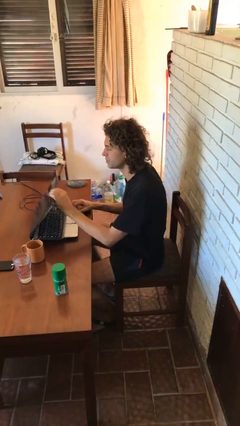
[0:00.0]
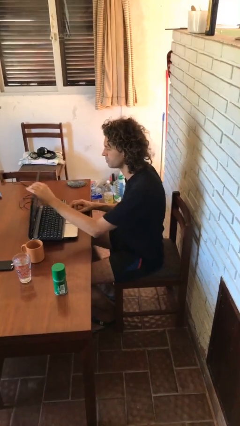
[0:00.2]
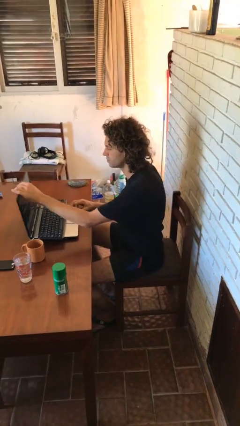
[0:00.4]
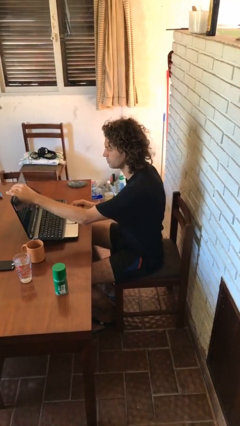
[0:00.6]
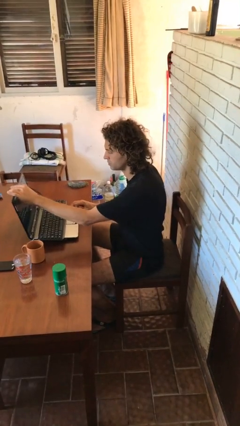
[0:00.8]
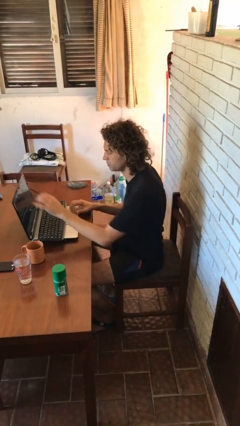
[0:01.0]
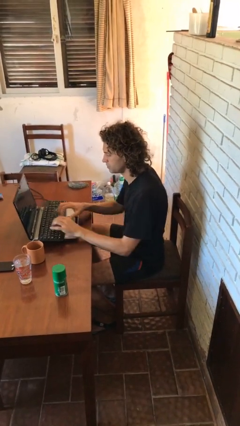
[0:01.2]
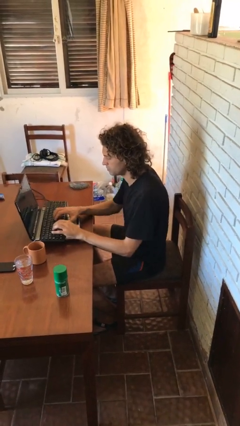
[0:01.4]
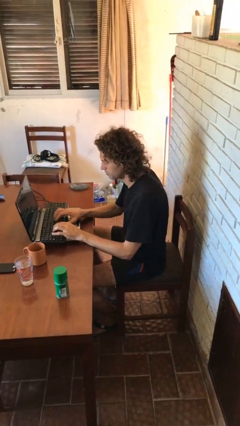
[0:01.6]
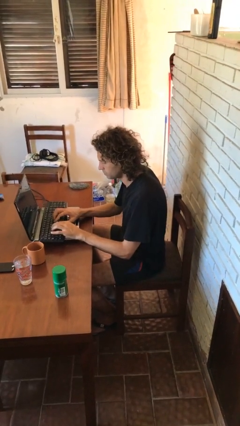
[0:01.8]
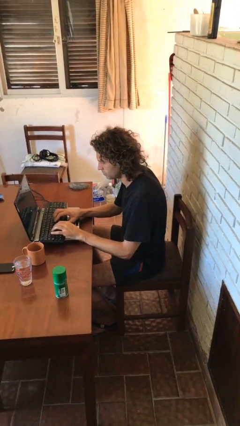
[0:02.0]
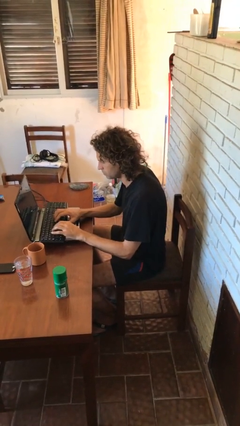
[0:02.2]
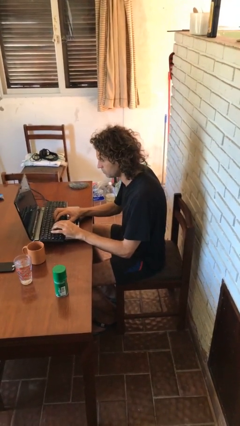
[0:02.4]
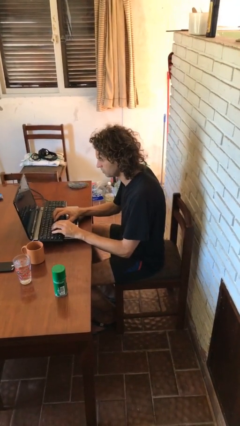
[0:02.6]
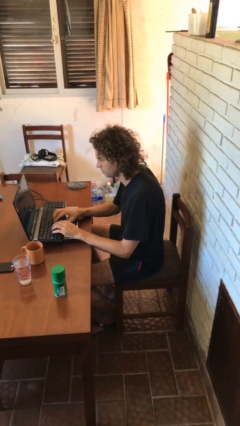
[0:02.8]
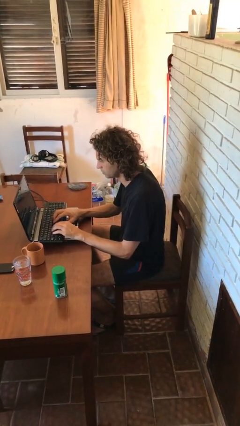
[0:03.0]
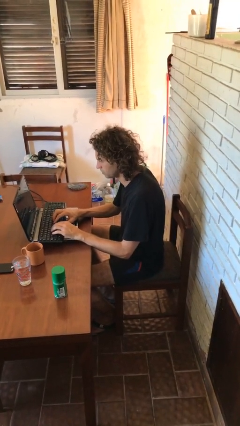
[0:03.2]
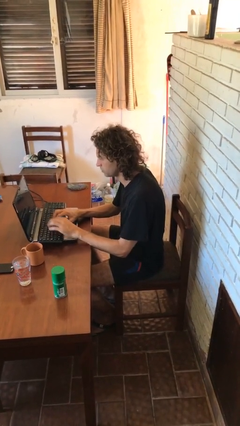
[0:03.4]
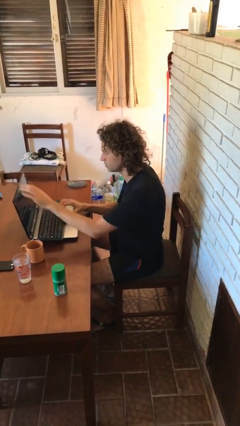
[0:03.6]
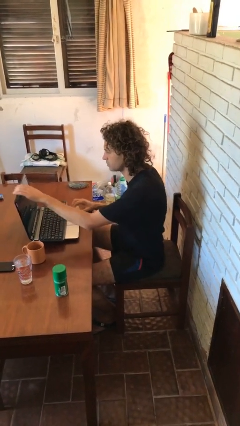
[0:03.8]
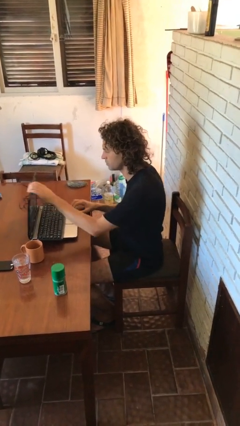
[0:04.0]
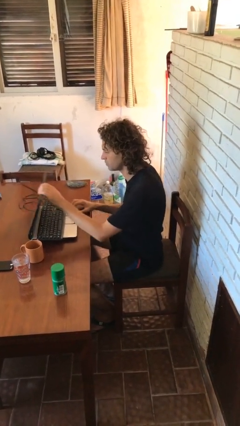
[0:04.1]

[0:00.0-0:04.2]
person interacts with laptop

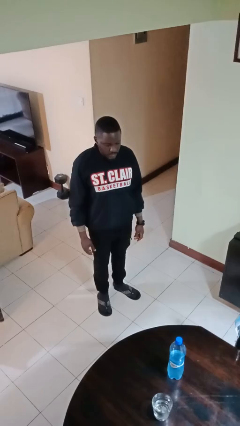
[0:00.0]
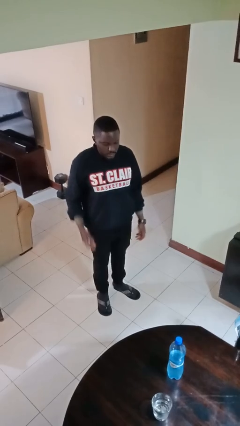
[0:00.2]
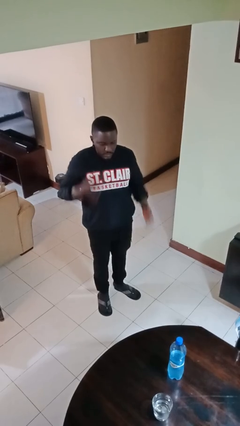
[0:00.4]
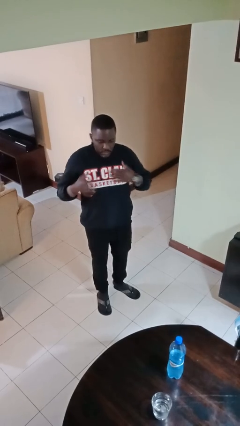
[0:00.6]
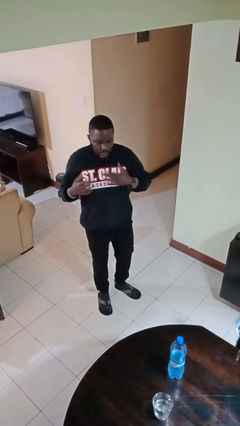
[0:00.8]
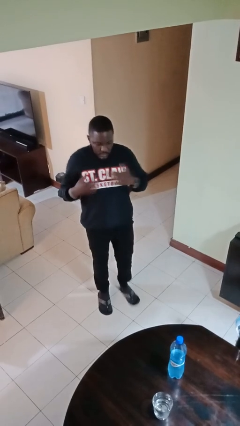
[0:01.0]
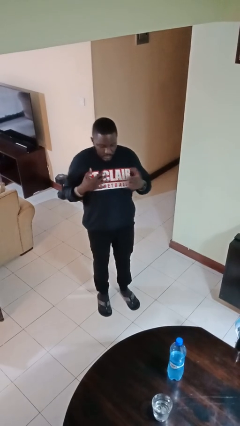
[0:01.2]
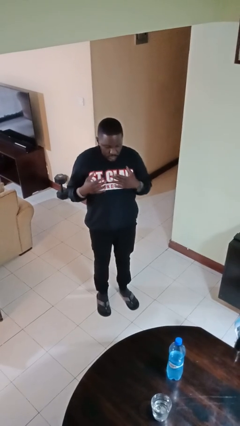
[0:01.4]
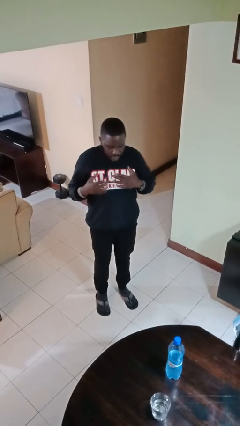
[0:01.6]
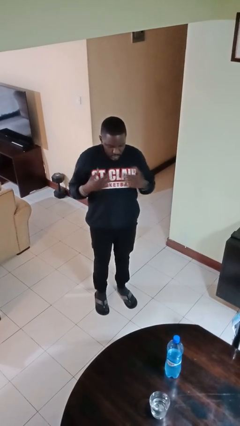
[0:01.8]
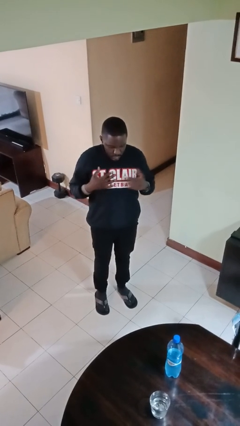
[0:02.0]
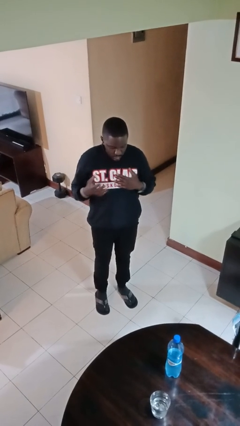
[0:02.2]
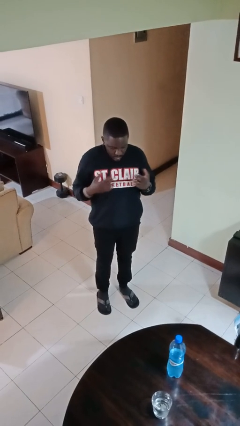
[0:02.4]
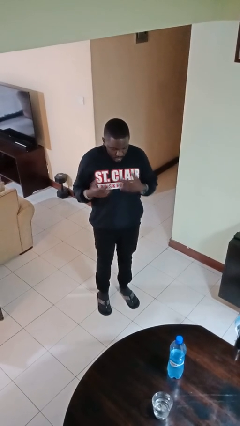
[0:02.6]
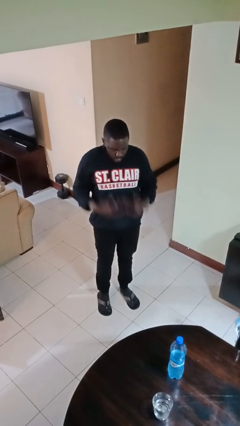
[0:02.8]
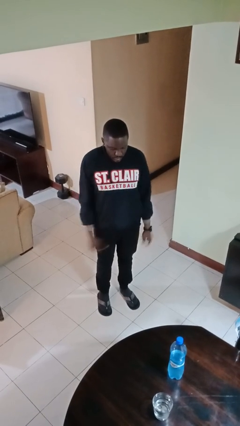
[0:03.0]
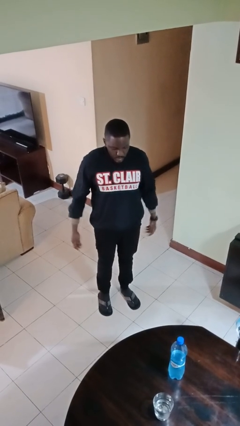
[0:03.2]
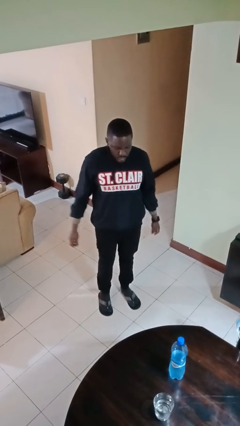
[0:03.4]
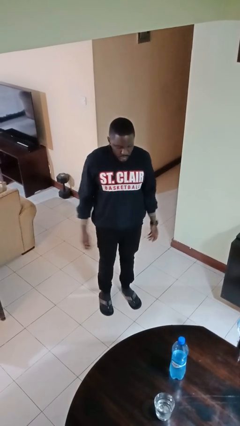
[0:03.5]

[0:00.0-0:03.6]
person drums on chest

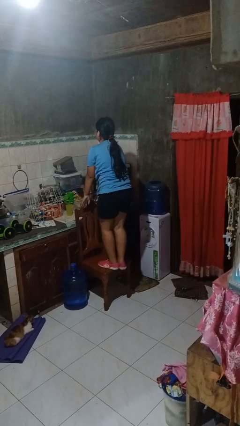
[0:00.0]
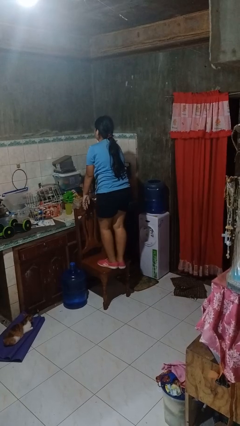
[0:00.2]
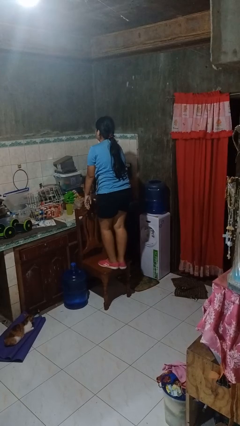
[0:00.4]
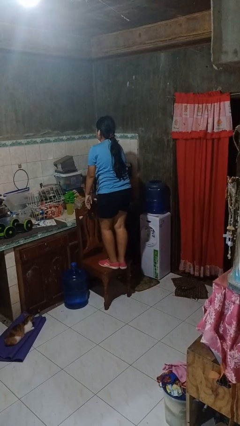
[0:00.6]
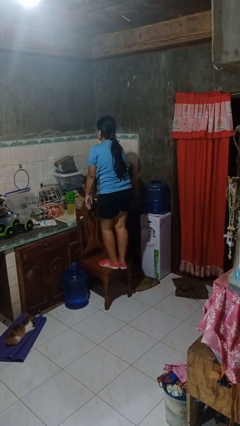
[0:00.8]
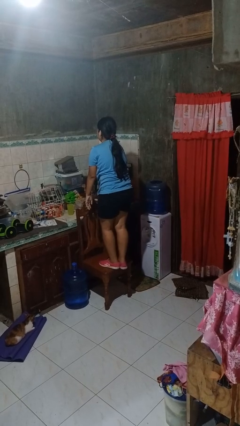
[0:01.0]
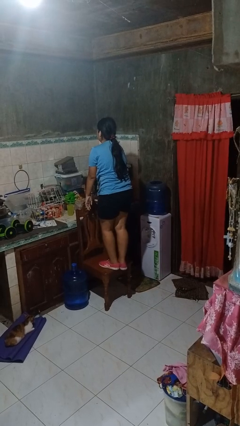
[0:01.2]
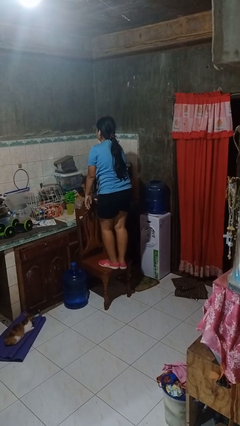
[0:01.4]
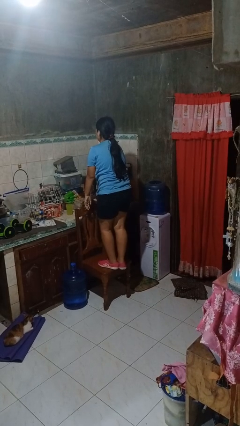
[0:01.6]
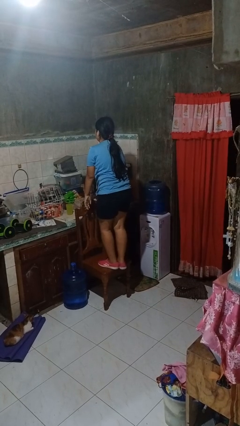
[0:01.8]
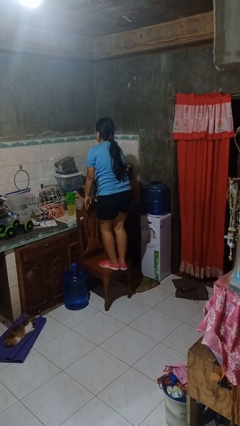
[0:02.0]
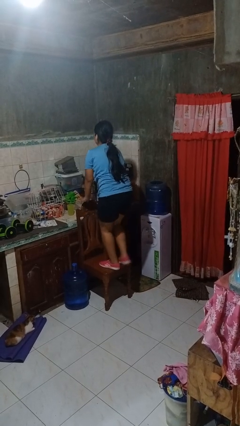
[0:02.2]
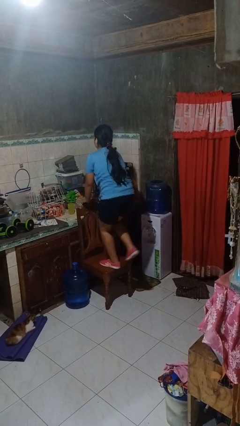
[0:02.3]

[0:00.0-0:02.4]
person climbs on chair

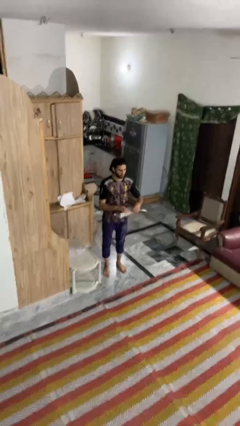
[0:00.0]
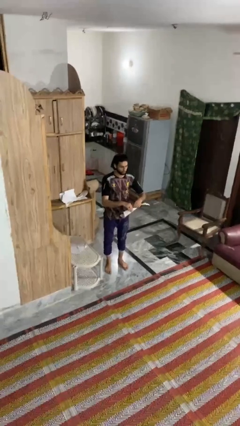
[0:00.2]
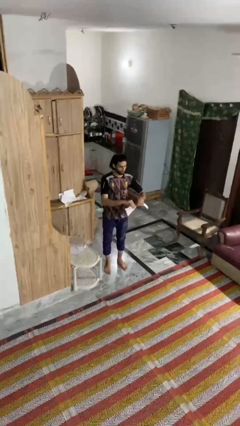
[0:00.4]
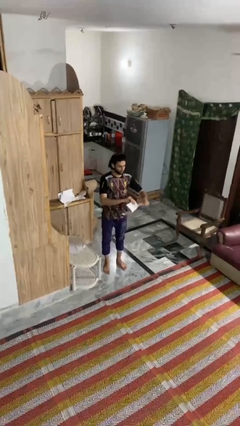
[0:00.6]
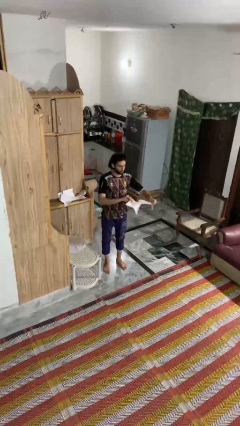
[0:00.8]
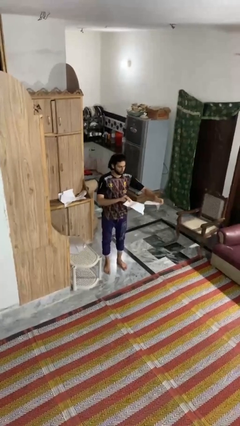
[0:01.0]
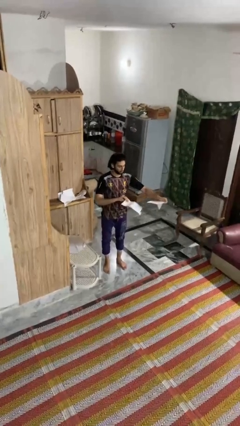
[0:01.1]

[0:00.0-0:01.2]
person tears paper

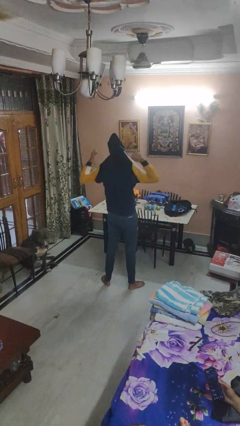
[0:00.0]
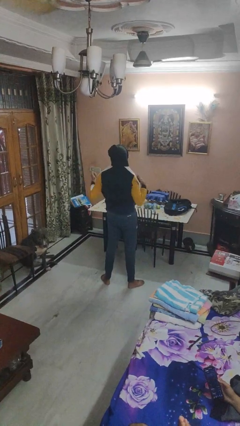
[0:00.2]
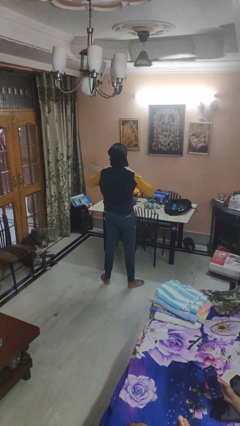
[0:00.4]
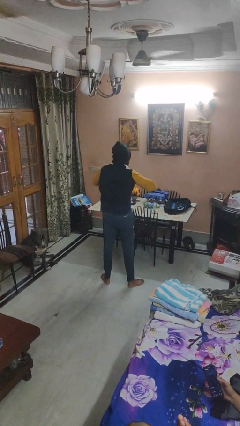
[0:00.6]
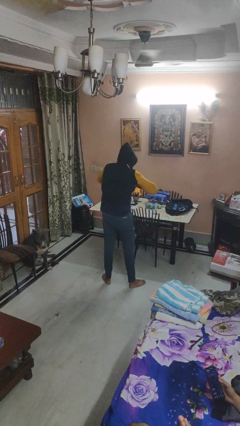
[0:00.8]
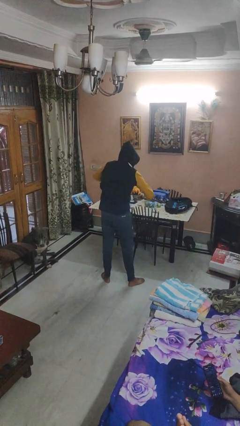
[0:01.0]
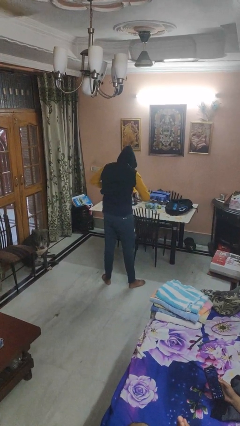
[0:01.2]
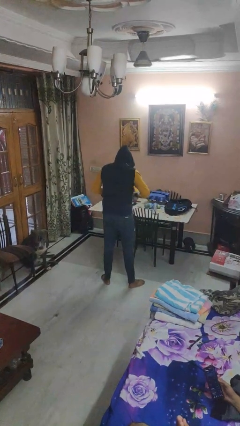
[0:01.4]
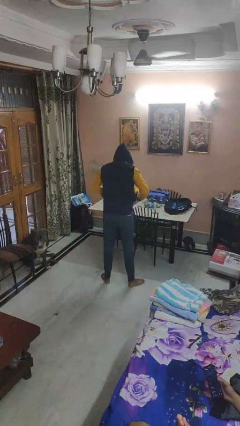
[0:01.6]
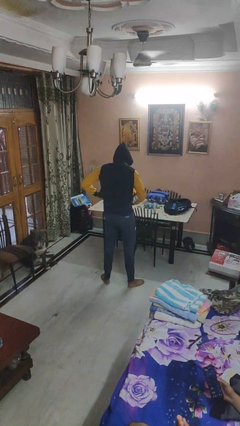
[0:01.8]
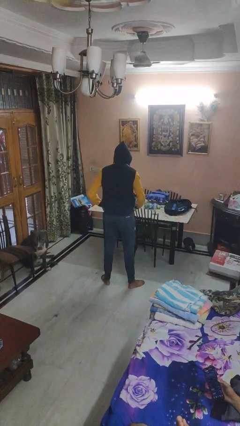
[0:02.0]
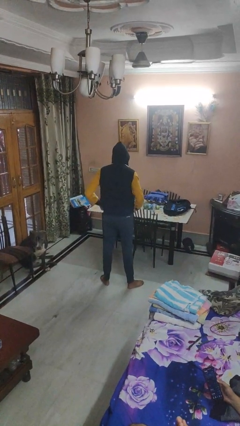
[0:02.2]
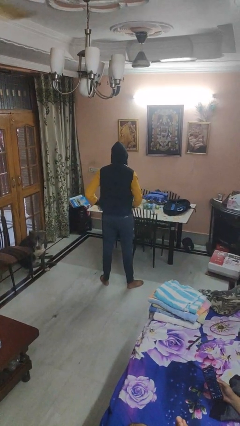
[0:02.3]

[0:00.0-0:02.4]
person puts on hoodie

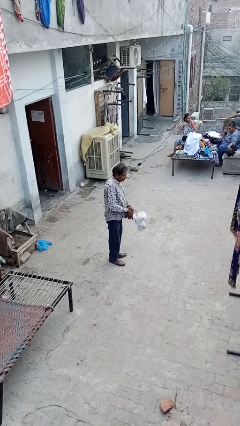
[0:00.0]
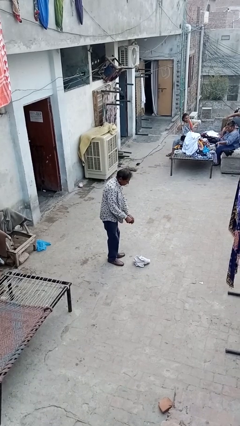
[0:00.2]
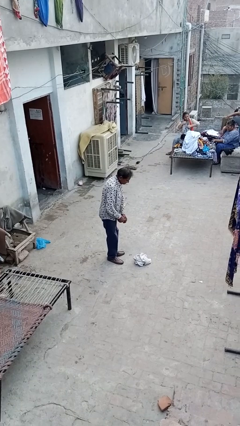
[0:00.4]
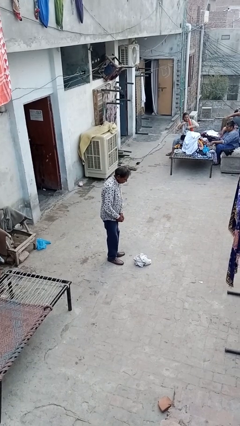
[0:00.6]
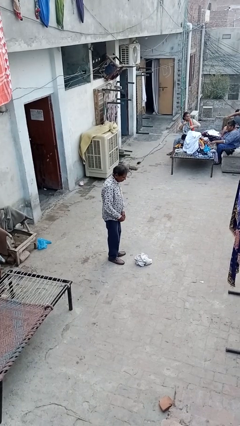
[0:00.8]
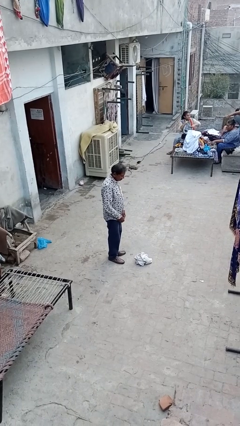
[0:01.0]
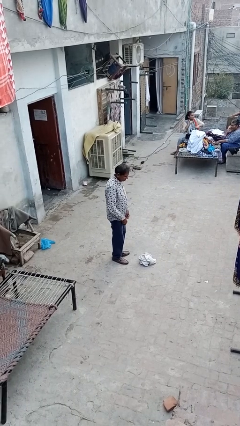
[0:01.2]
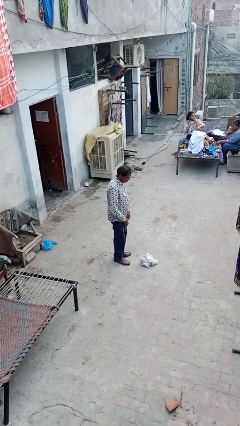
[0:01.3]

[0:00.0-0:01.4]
person catches dropped object

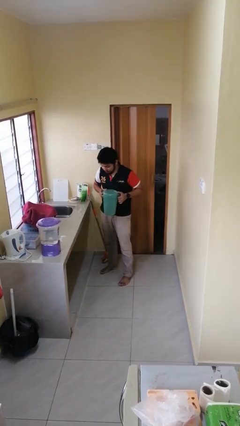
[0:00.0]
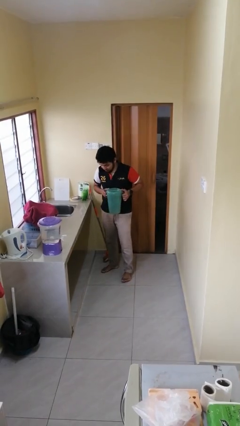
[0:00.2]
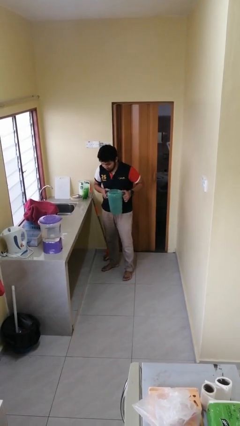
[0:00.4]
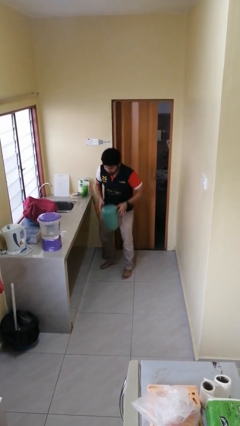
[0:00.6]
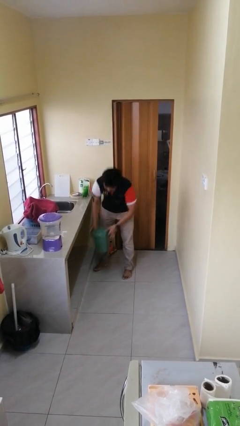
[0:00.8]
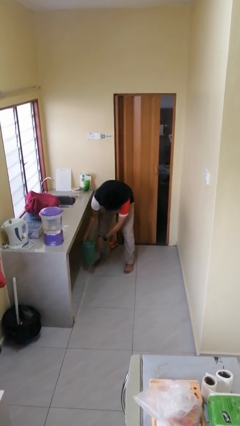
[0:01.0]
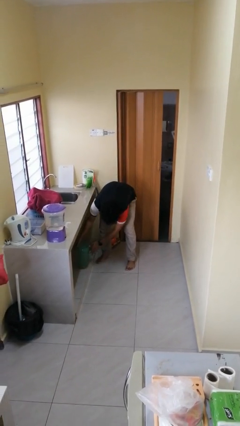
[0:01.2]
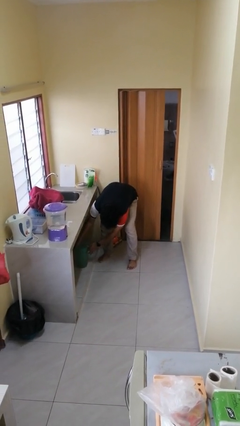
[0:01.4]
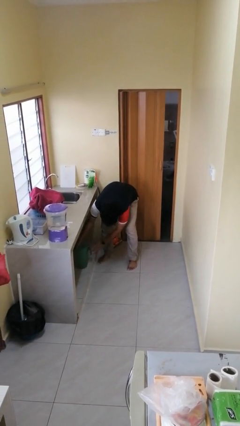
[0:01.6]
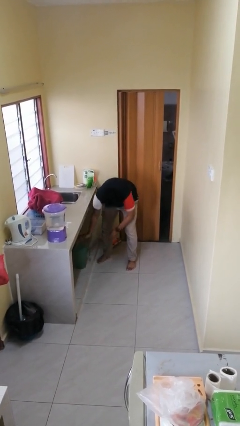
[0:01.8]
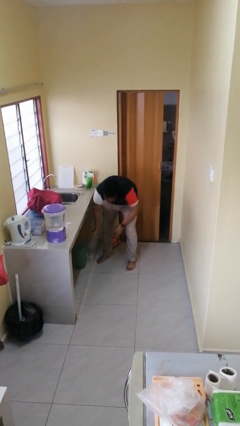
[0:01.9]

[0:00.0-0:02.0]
person puts down object into cabinet
